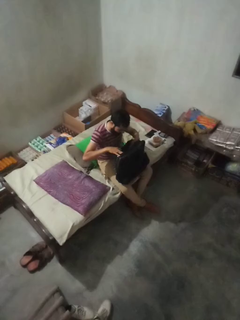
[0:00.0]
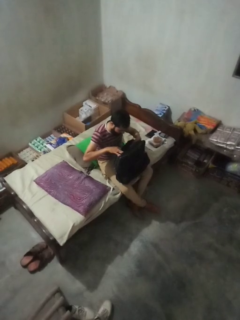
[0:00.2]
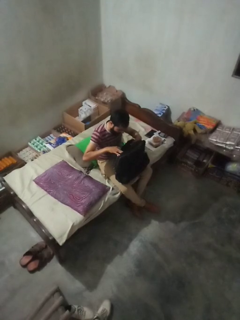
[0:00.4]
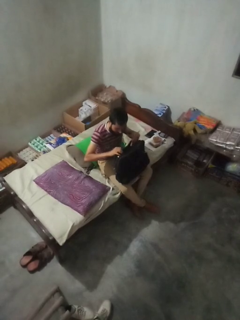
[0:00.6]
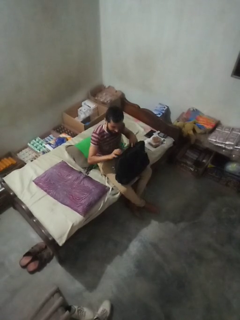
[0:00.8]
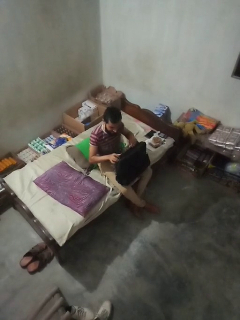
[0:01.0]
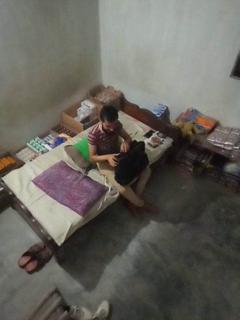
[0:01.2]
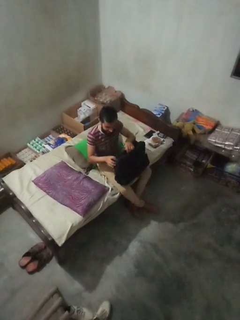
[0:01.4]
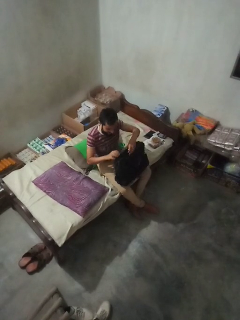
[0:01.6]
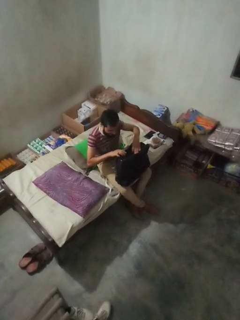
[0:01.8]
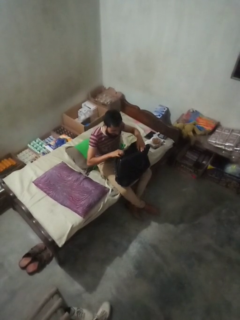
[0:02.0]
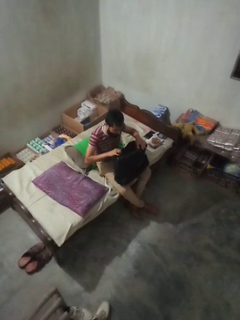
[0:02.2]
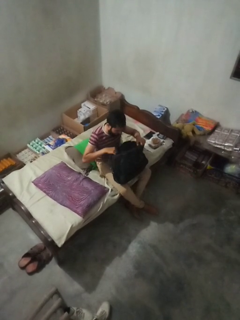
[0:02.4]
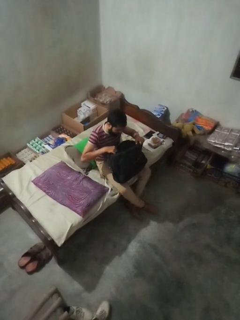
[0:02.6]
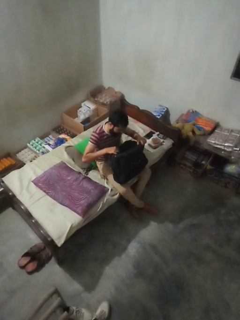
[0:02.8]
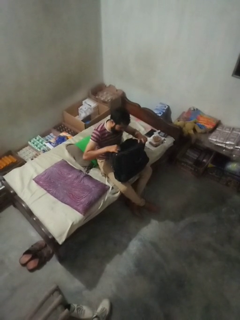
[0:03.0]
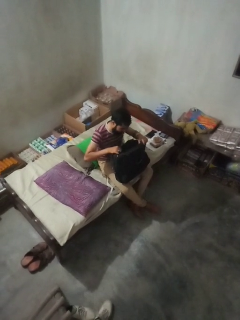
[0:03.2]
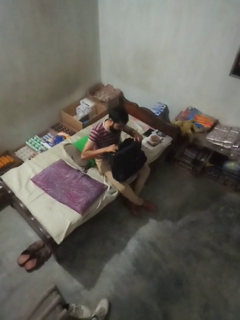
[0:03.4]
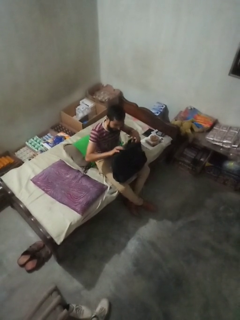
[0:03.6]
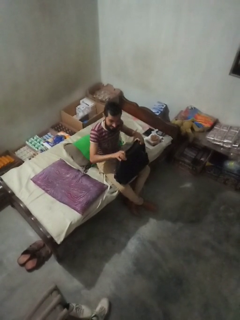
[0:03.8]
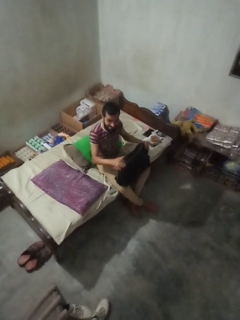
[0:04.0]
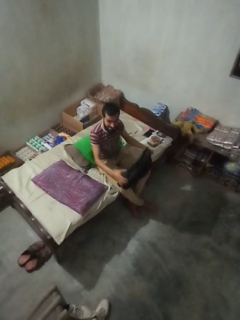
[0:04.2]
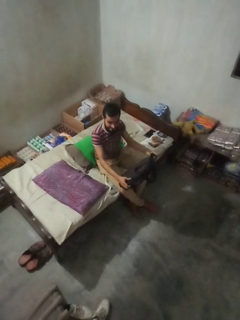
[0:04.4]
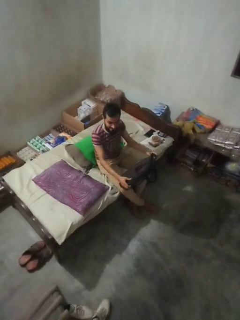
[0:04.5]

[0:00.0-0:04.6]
person searches in bag

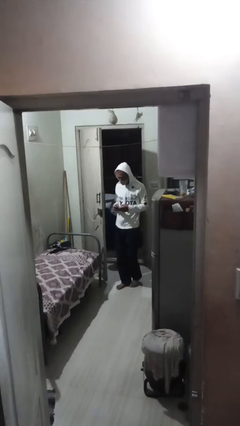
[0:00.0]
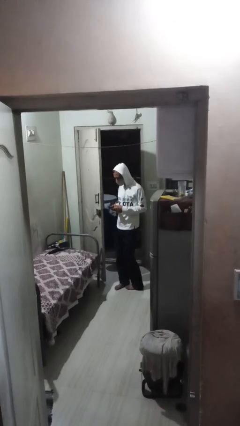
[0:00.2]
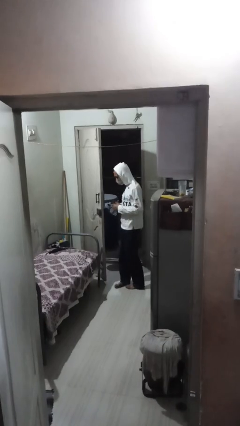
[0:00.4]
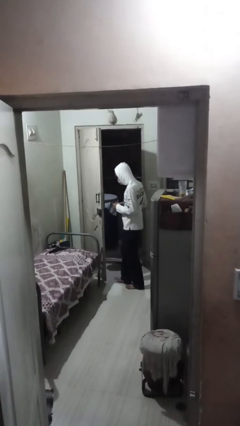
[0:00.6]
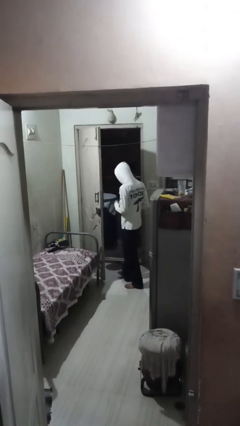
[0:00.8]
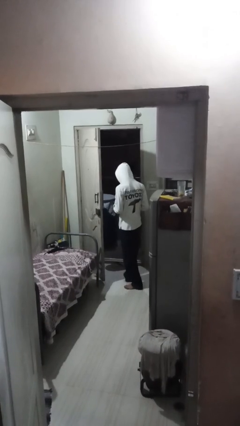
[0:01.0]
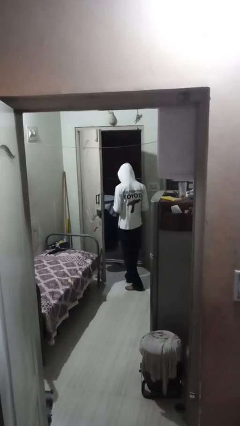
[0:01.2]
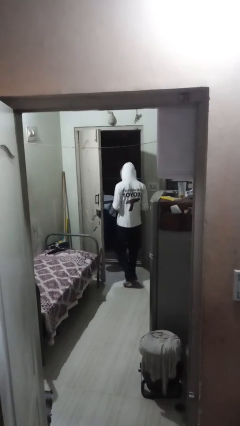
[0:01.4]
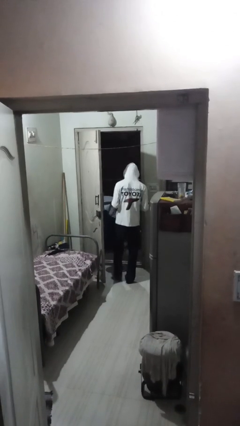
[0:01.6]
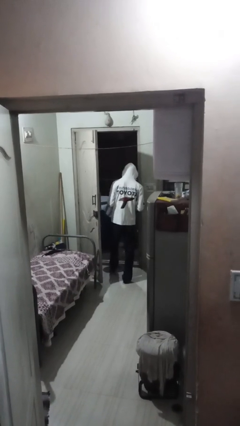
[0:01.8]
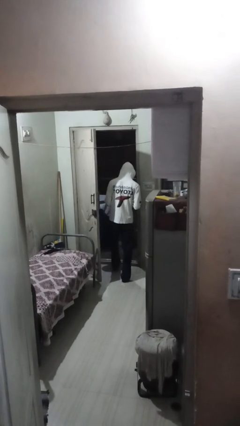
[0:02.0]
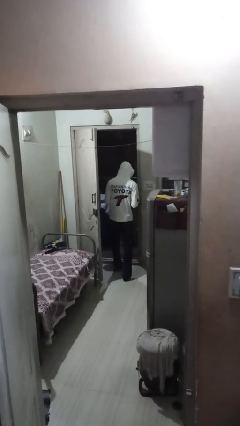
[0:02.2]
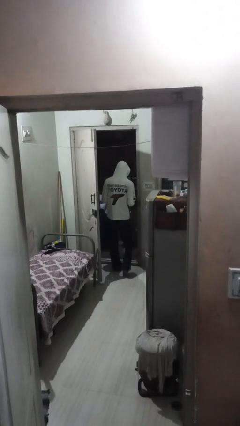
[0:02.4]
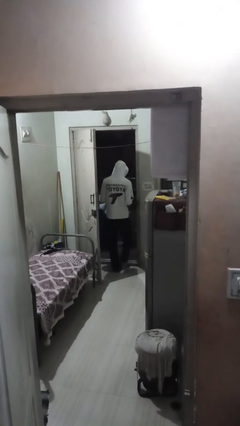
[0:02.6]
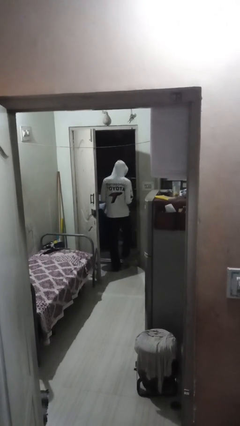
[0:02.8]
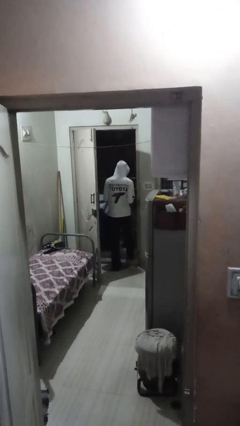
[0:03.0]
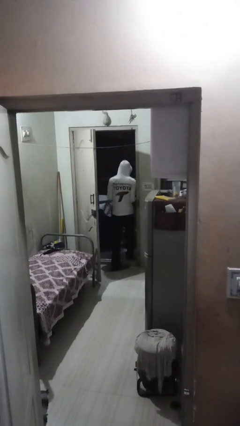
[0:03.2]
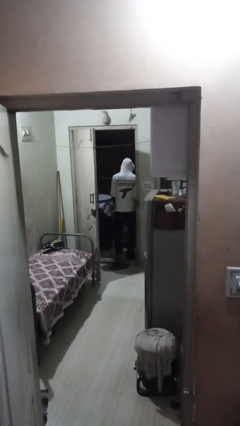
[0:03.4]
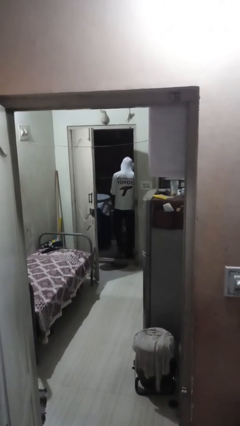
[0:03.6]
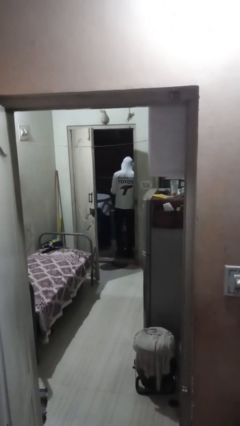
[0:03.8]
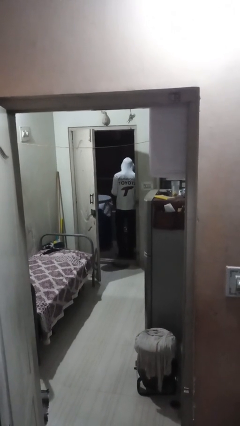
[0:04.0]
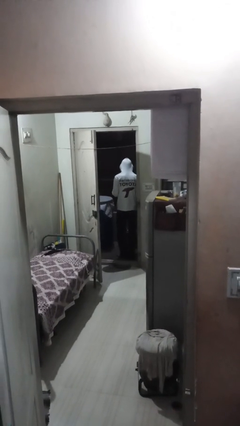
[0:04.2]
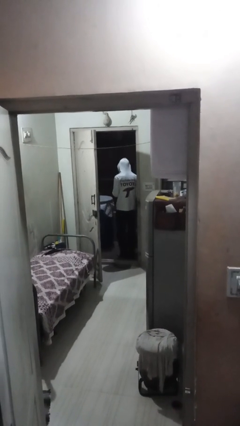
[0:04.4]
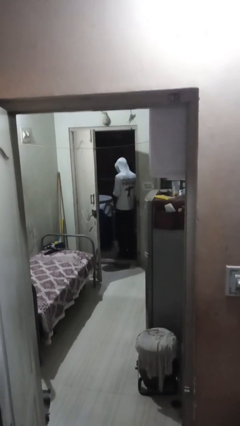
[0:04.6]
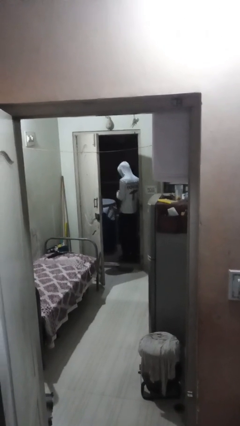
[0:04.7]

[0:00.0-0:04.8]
person exits scene through structure

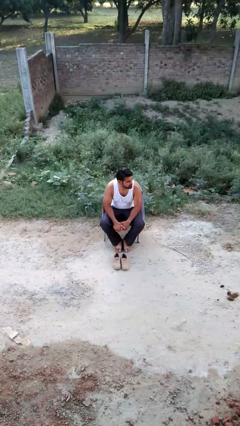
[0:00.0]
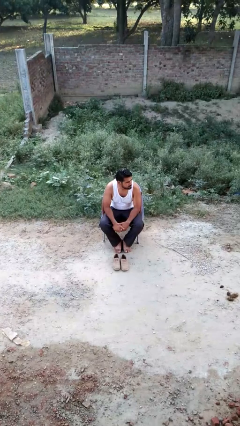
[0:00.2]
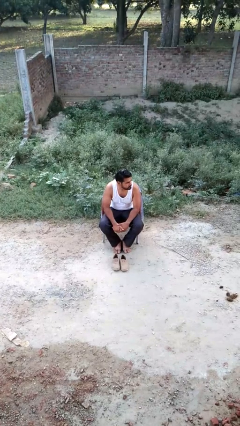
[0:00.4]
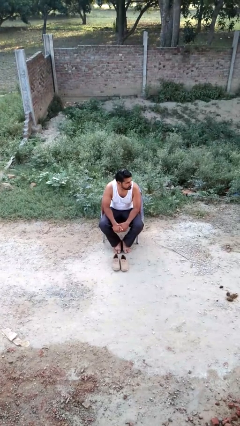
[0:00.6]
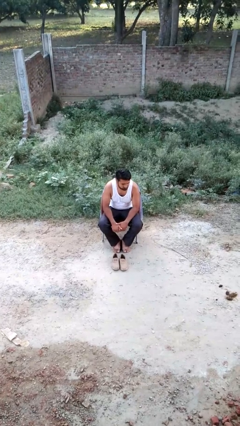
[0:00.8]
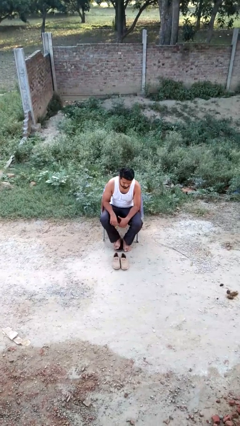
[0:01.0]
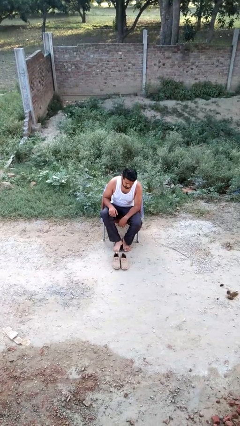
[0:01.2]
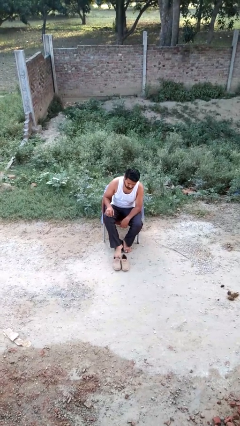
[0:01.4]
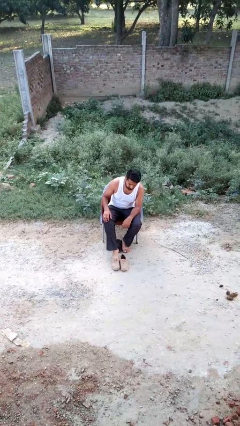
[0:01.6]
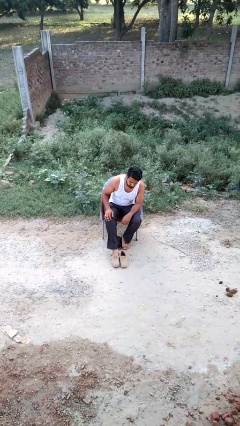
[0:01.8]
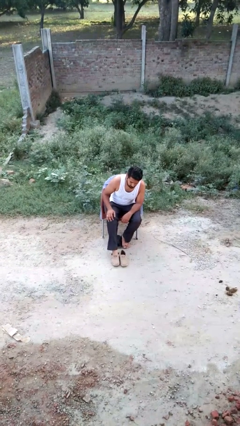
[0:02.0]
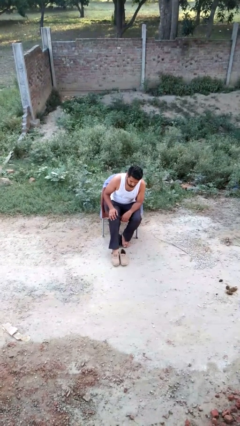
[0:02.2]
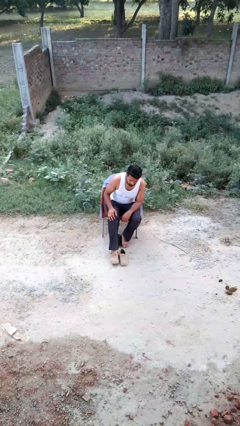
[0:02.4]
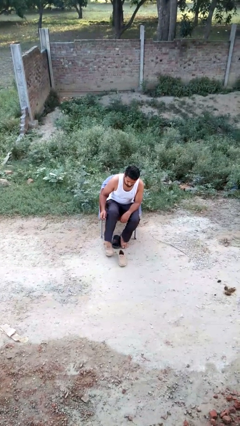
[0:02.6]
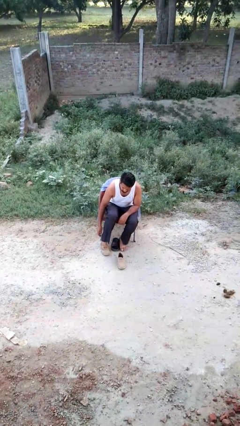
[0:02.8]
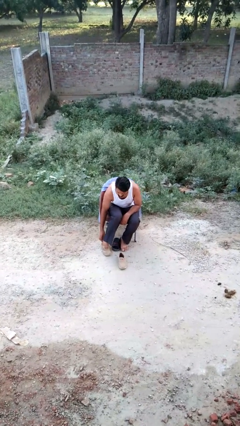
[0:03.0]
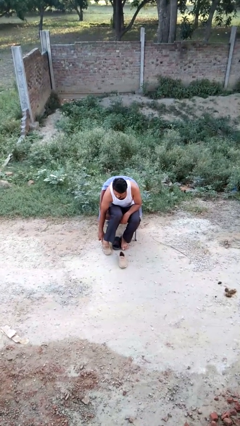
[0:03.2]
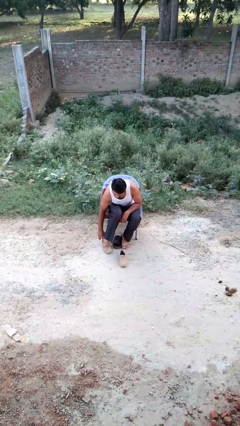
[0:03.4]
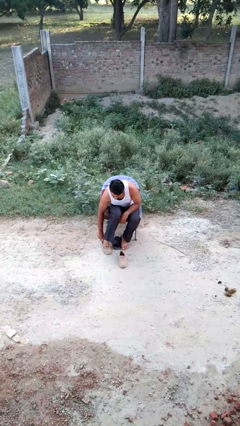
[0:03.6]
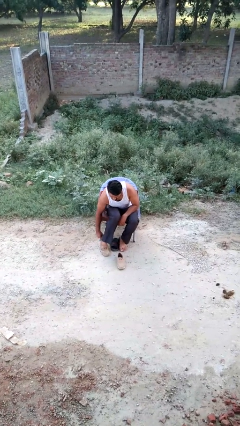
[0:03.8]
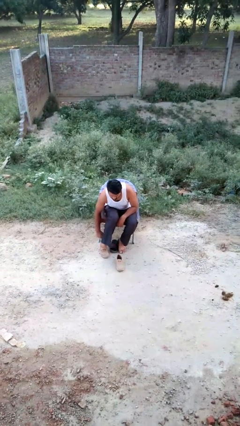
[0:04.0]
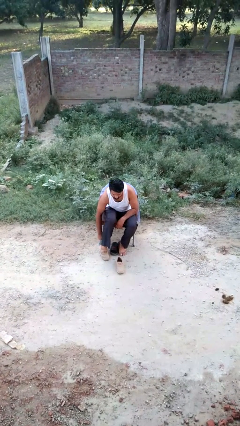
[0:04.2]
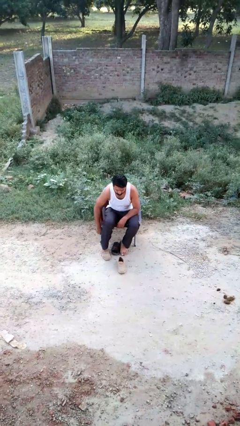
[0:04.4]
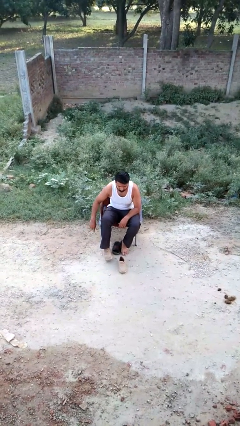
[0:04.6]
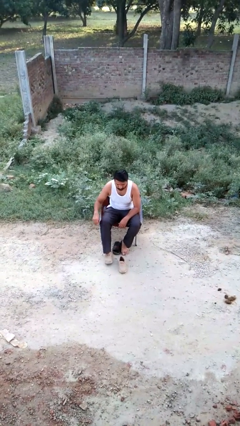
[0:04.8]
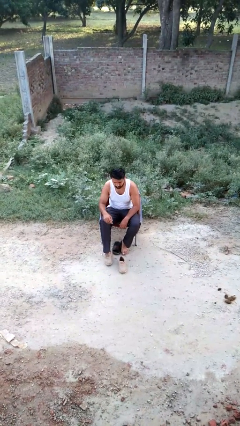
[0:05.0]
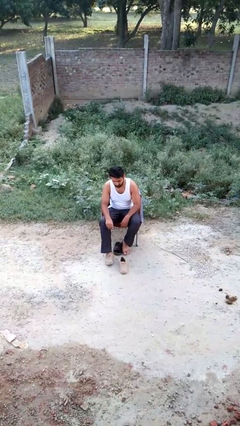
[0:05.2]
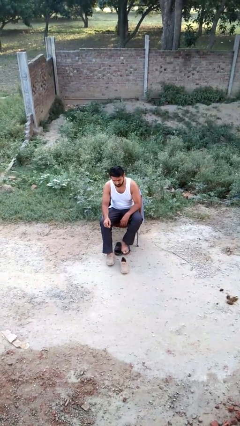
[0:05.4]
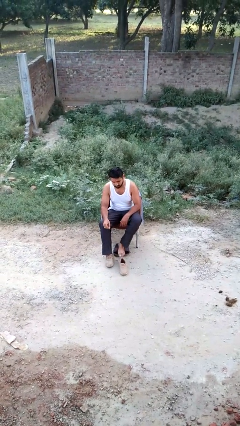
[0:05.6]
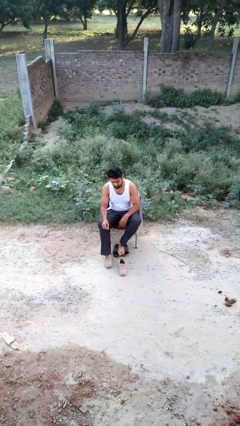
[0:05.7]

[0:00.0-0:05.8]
person puts on shoes

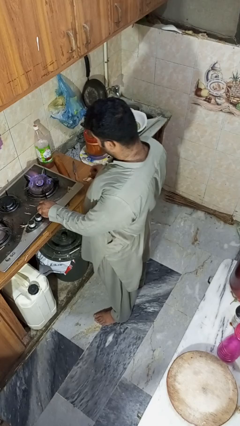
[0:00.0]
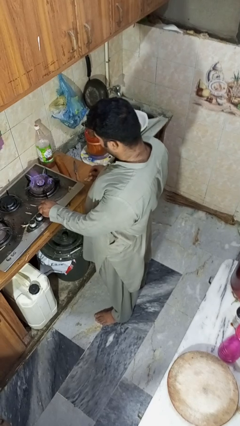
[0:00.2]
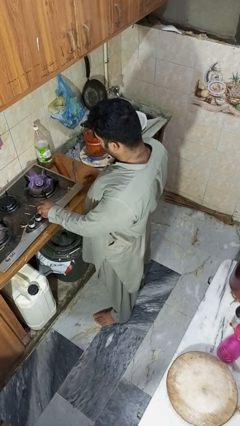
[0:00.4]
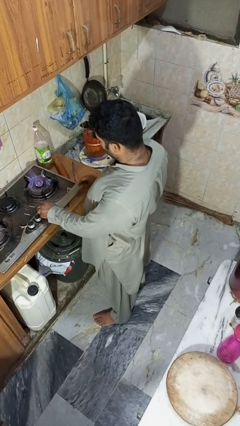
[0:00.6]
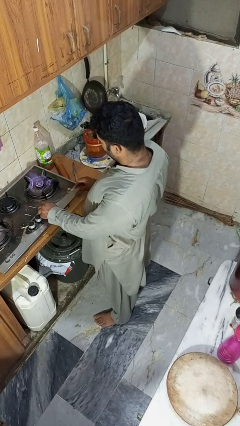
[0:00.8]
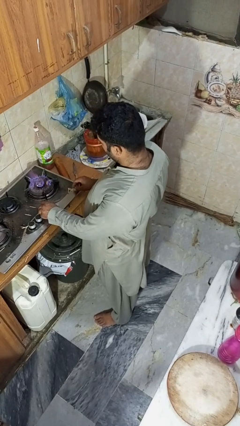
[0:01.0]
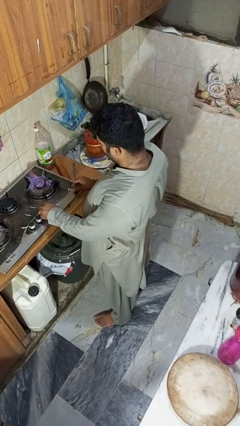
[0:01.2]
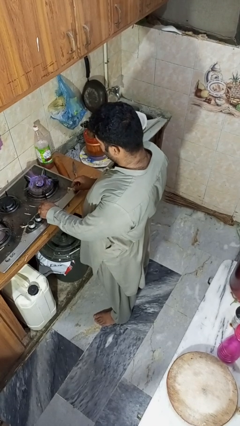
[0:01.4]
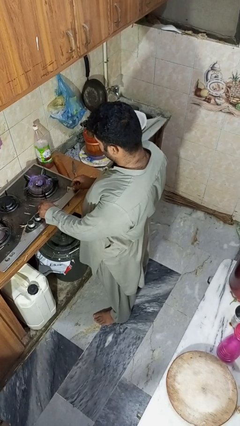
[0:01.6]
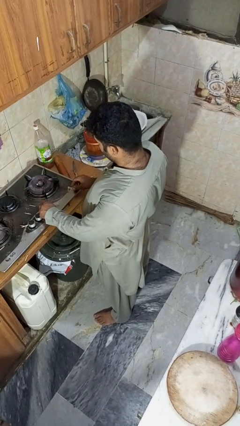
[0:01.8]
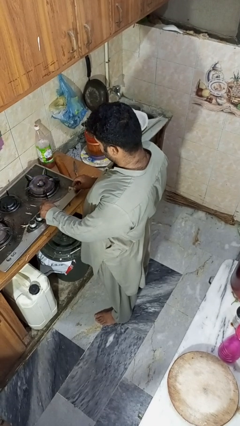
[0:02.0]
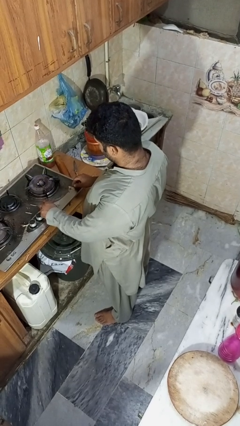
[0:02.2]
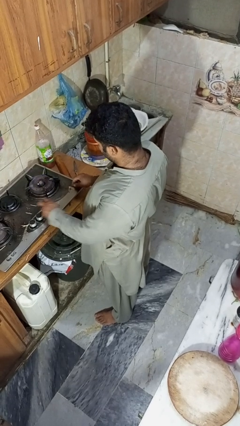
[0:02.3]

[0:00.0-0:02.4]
person turns off stovetop

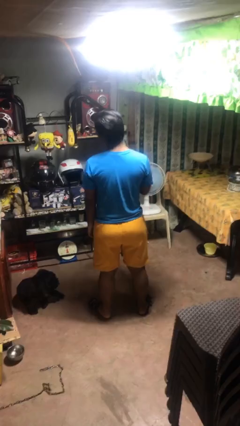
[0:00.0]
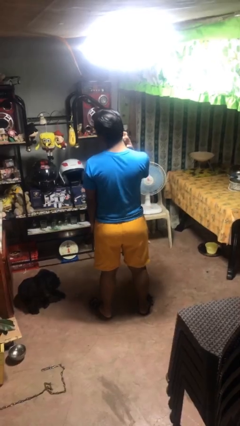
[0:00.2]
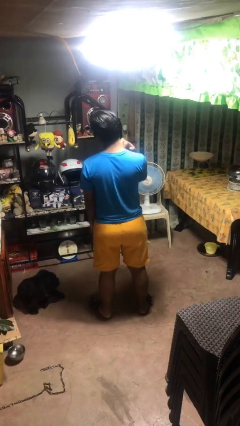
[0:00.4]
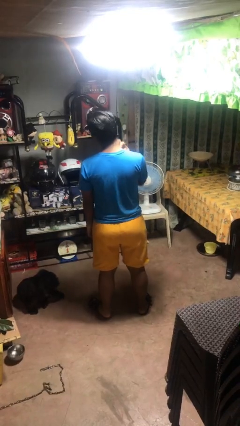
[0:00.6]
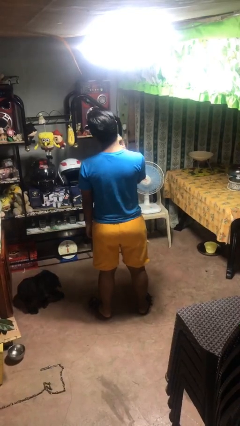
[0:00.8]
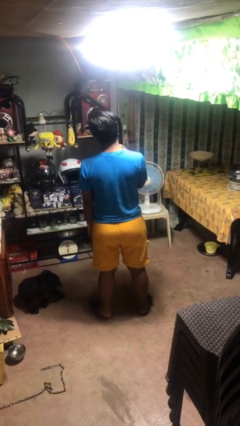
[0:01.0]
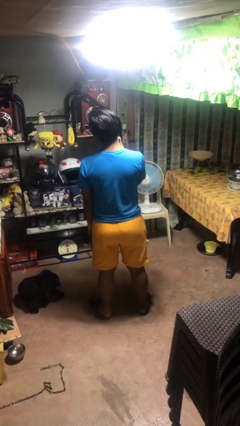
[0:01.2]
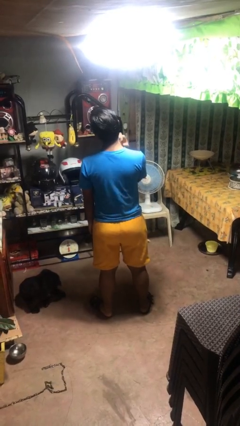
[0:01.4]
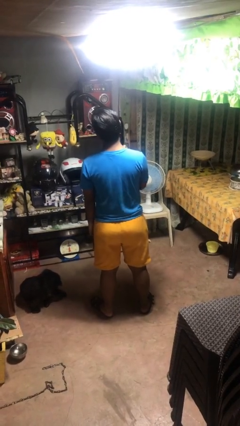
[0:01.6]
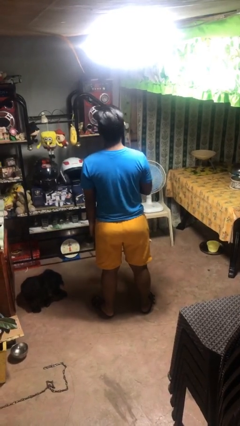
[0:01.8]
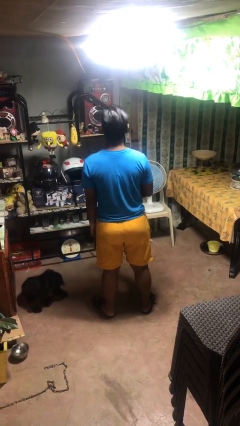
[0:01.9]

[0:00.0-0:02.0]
person scratches face
